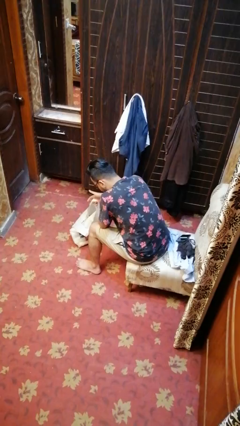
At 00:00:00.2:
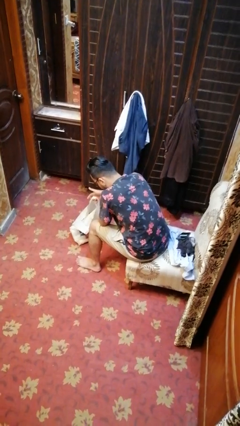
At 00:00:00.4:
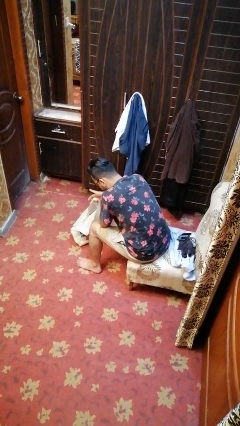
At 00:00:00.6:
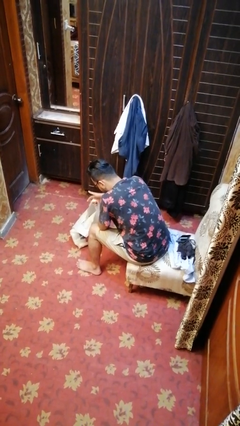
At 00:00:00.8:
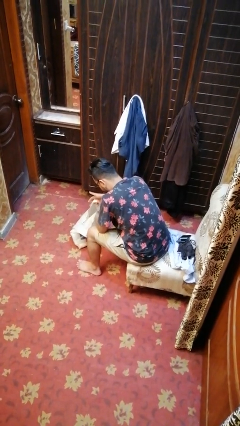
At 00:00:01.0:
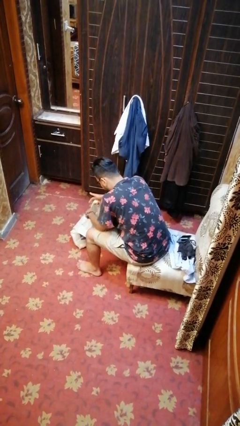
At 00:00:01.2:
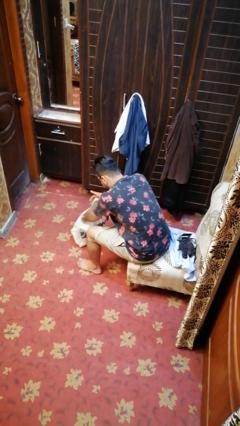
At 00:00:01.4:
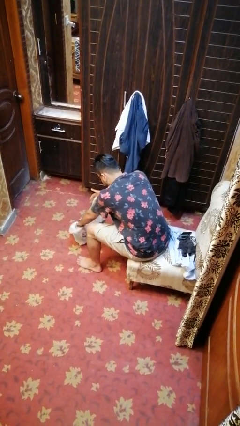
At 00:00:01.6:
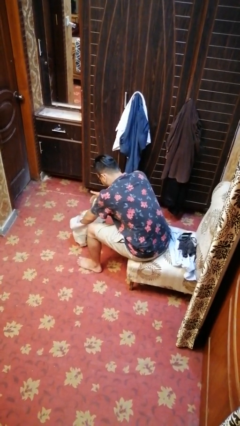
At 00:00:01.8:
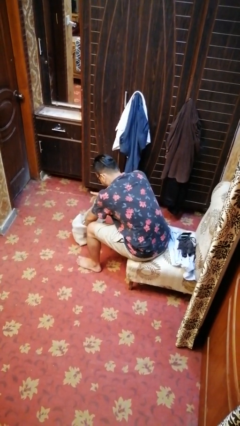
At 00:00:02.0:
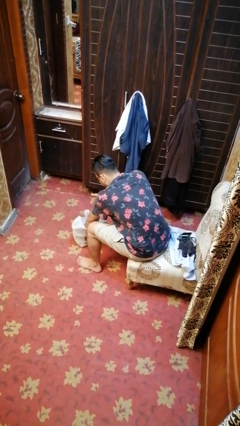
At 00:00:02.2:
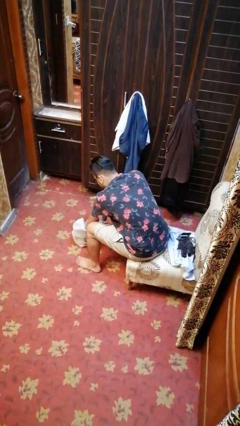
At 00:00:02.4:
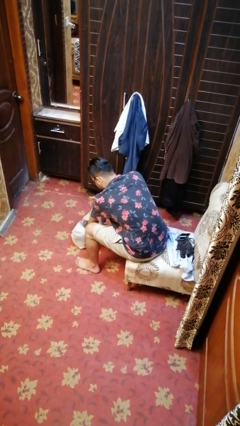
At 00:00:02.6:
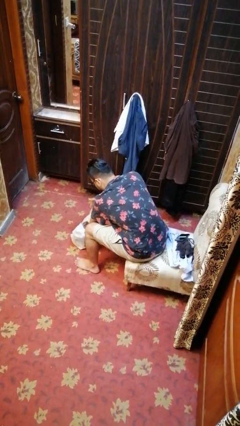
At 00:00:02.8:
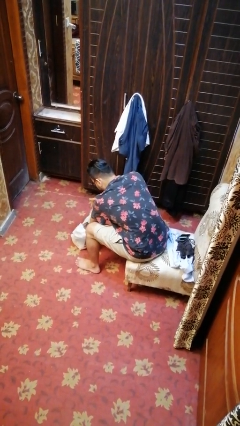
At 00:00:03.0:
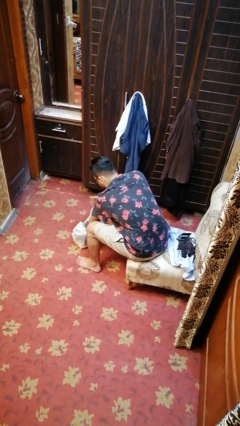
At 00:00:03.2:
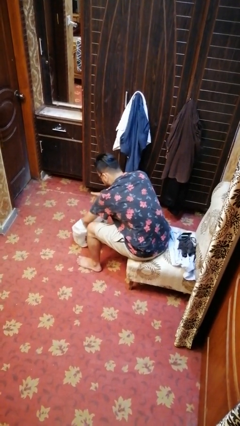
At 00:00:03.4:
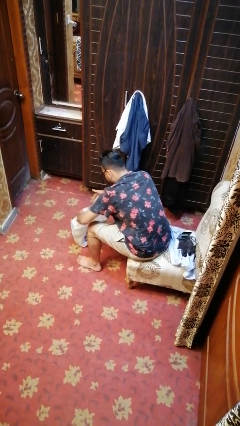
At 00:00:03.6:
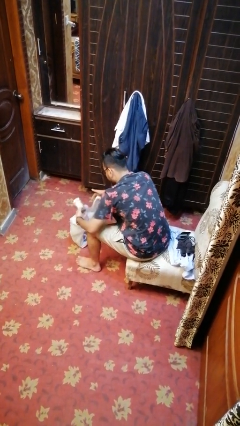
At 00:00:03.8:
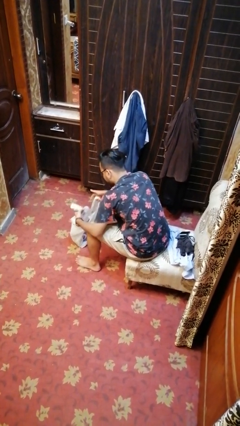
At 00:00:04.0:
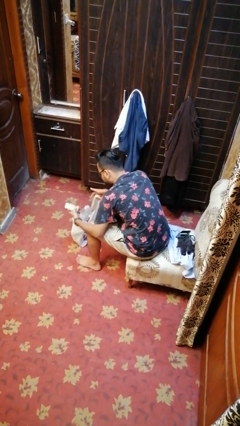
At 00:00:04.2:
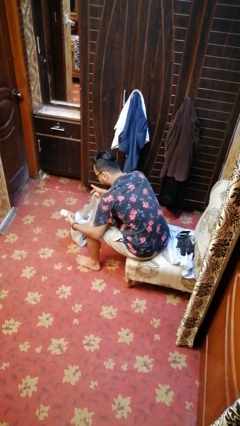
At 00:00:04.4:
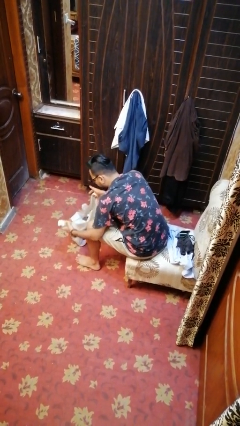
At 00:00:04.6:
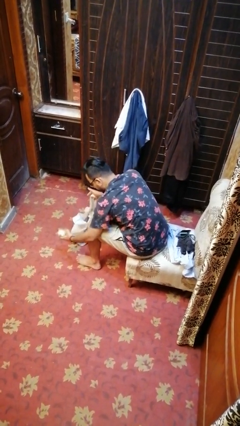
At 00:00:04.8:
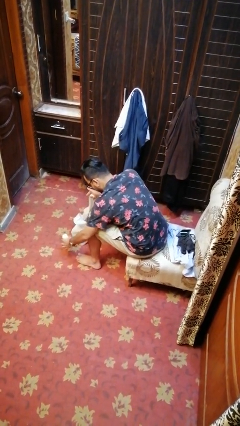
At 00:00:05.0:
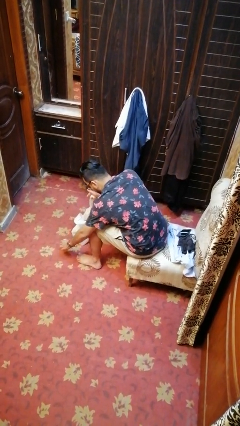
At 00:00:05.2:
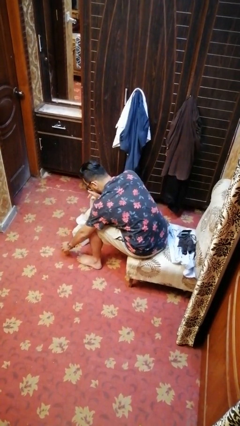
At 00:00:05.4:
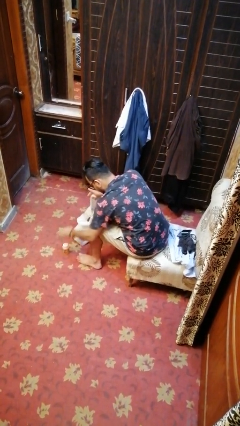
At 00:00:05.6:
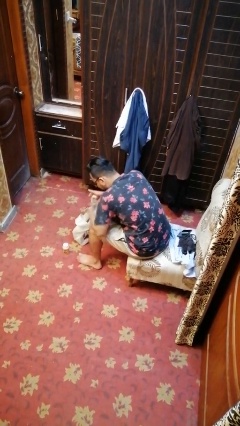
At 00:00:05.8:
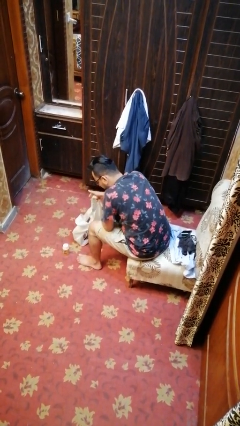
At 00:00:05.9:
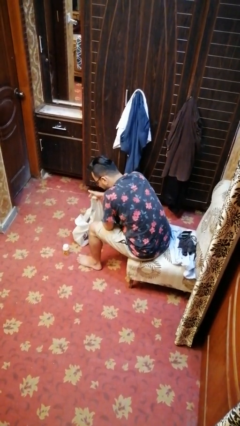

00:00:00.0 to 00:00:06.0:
person takes object from bag

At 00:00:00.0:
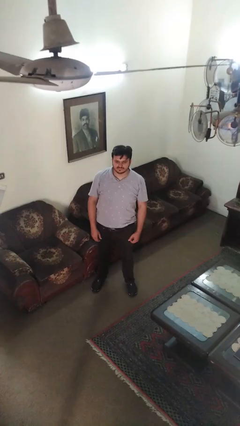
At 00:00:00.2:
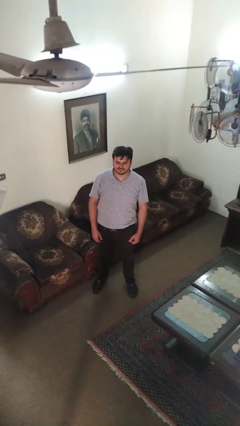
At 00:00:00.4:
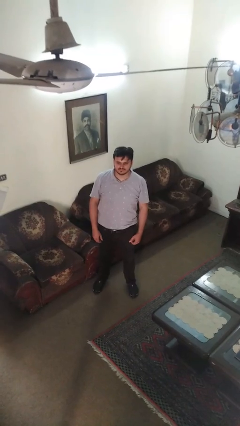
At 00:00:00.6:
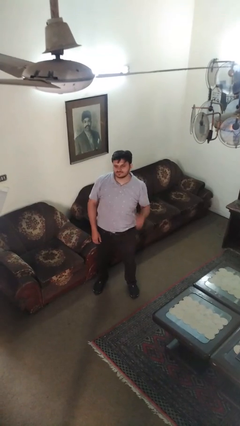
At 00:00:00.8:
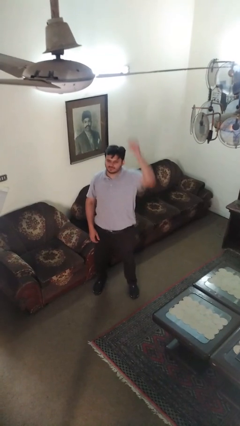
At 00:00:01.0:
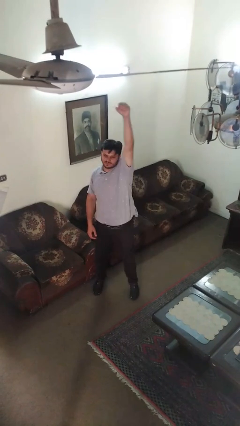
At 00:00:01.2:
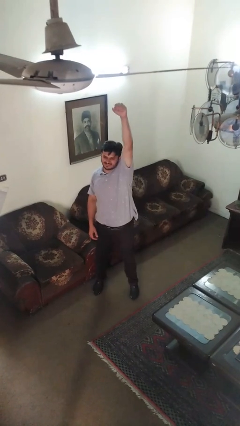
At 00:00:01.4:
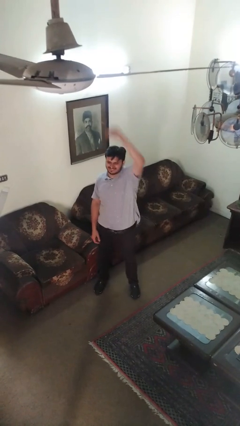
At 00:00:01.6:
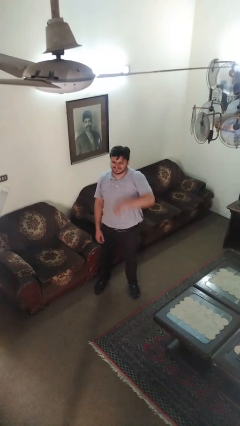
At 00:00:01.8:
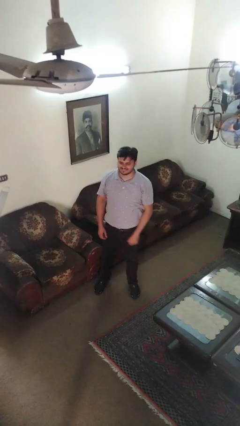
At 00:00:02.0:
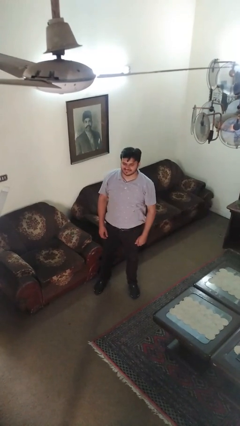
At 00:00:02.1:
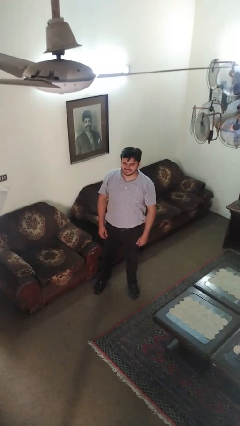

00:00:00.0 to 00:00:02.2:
person punches

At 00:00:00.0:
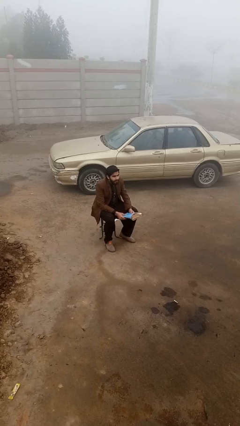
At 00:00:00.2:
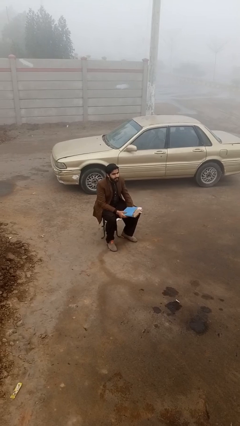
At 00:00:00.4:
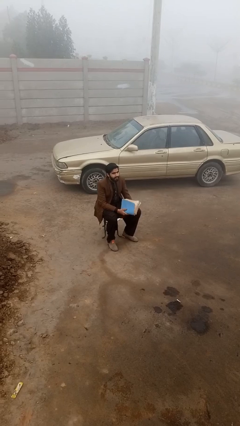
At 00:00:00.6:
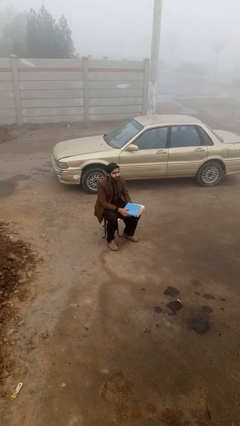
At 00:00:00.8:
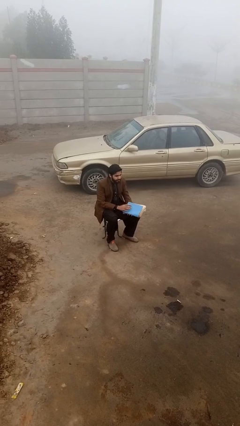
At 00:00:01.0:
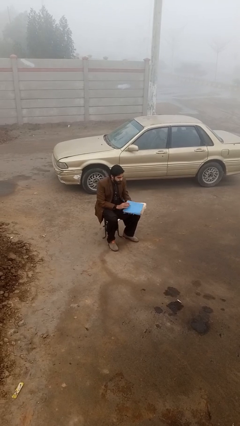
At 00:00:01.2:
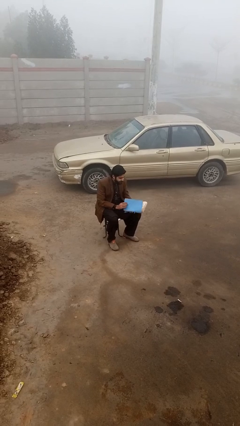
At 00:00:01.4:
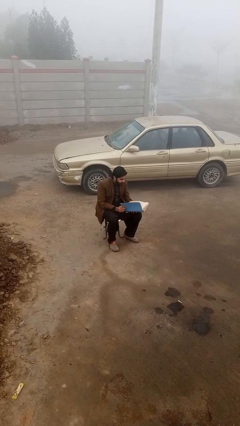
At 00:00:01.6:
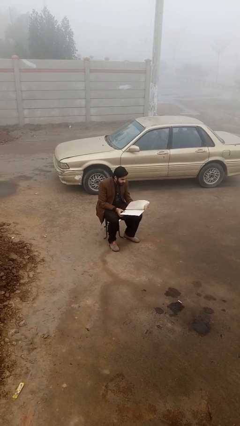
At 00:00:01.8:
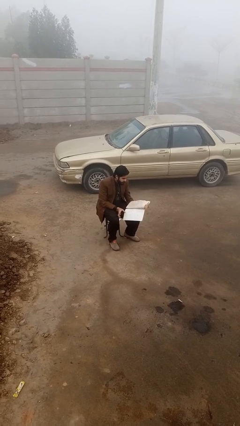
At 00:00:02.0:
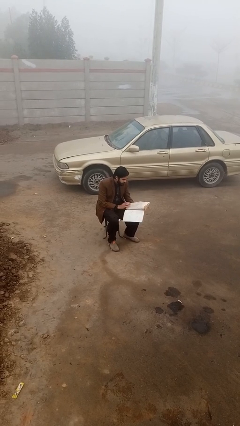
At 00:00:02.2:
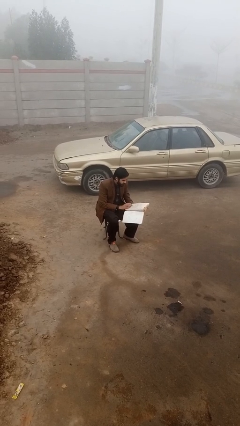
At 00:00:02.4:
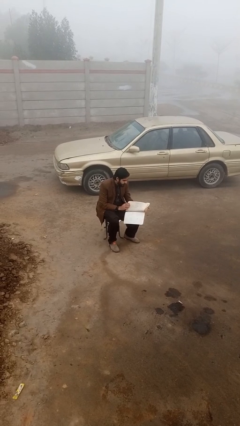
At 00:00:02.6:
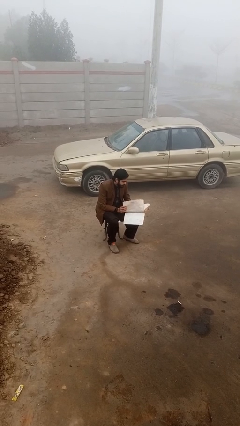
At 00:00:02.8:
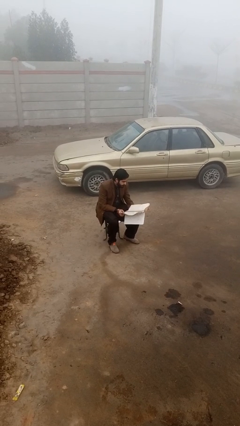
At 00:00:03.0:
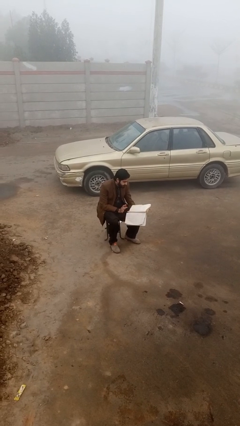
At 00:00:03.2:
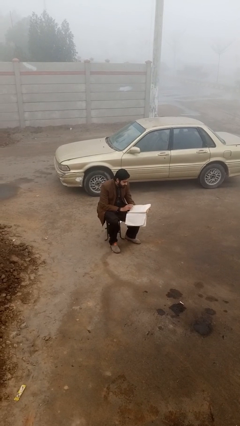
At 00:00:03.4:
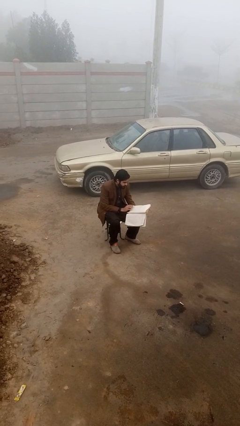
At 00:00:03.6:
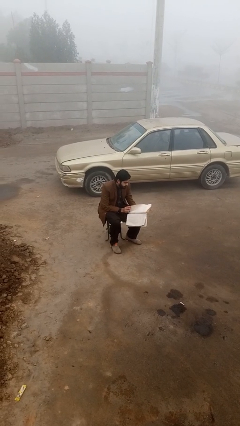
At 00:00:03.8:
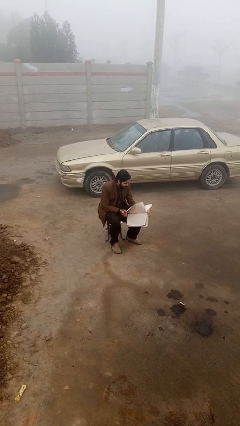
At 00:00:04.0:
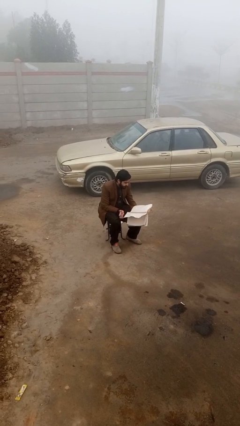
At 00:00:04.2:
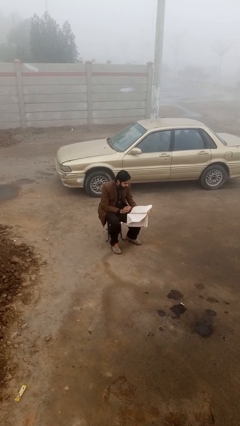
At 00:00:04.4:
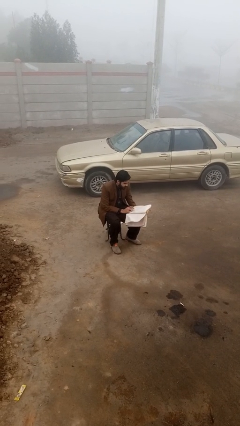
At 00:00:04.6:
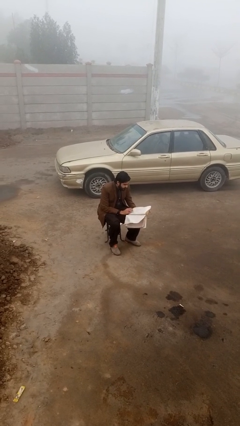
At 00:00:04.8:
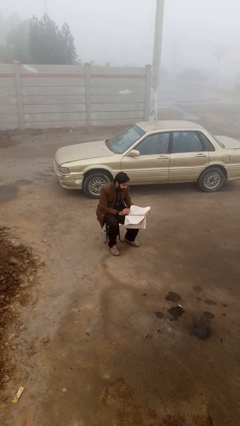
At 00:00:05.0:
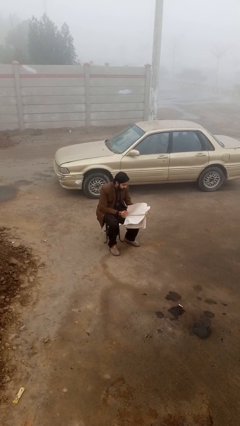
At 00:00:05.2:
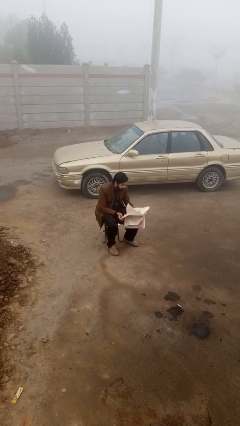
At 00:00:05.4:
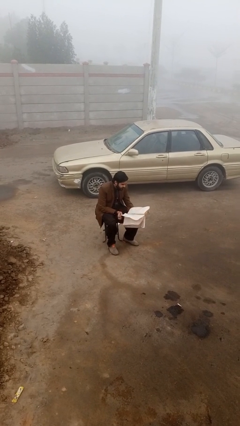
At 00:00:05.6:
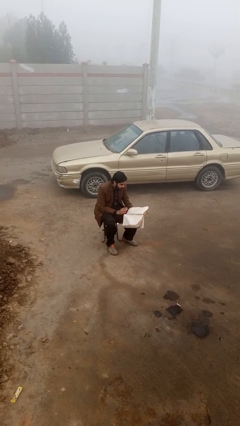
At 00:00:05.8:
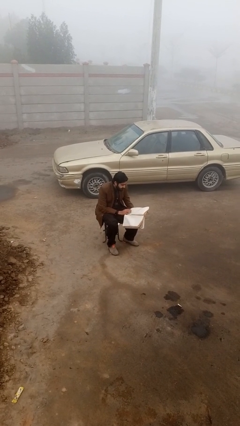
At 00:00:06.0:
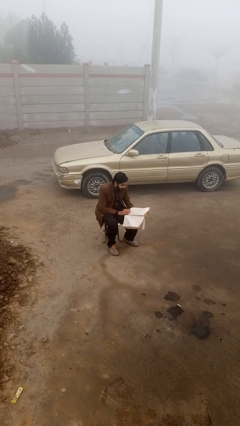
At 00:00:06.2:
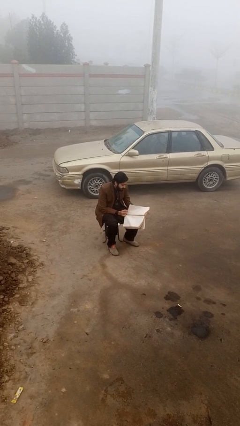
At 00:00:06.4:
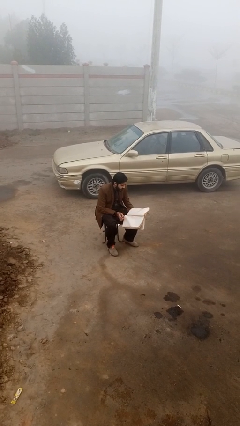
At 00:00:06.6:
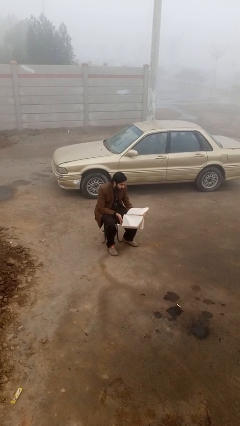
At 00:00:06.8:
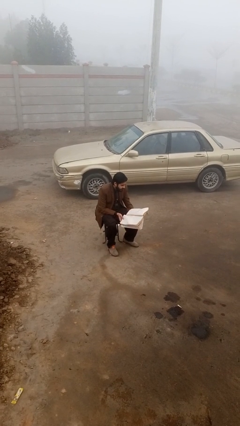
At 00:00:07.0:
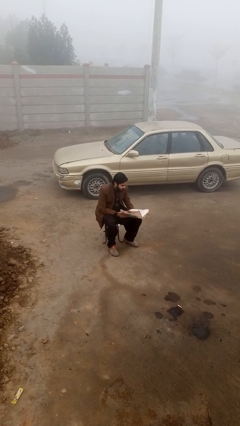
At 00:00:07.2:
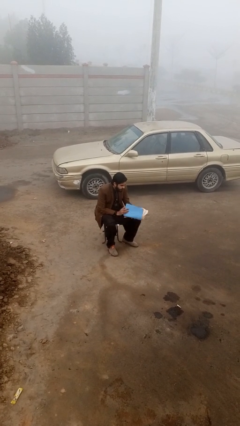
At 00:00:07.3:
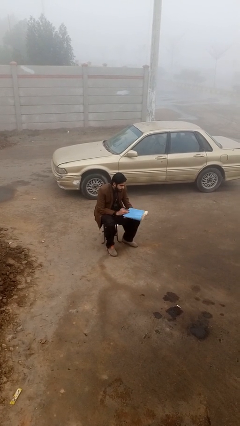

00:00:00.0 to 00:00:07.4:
person reads document

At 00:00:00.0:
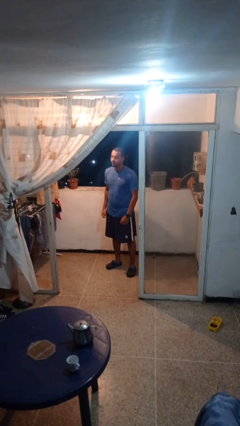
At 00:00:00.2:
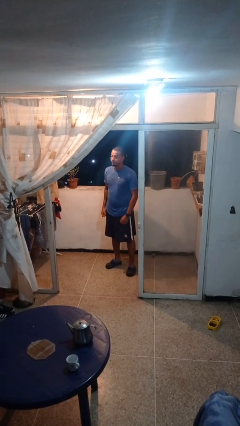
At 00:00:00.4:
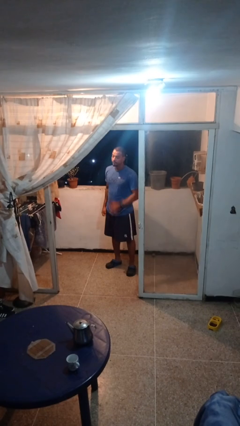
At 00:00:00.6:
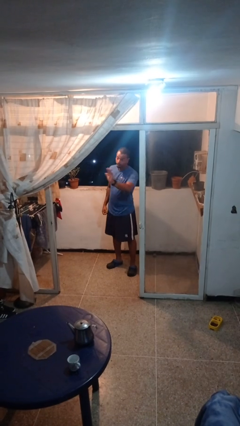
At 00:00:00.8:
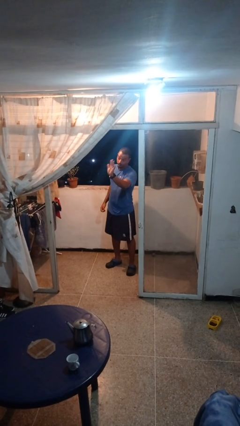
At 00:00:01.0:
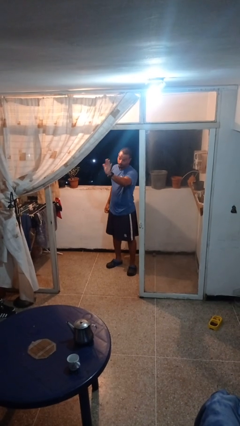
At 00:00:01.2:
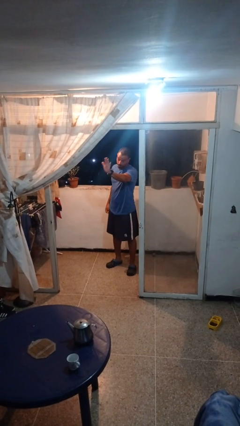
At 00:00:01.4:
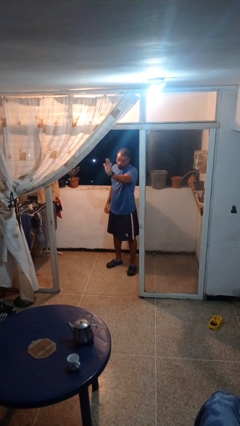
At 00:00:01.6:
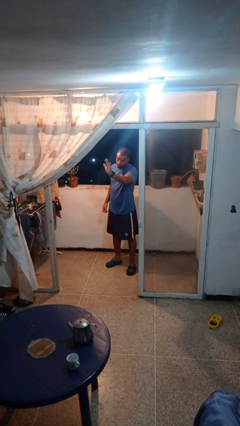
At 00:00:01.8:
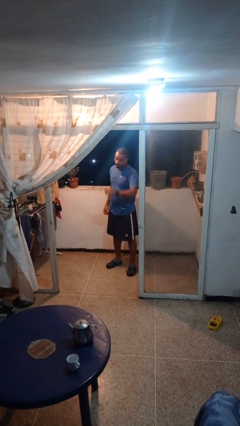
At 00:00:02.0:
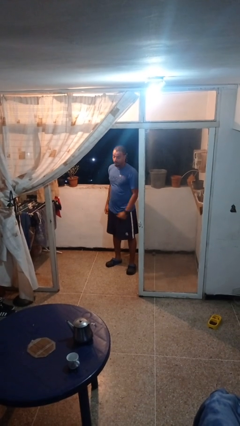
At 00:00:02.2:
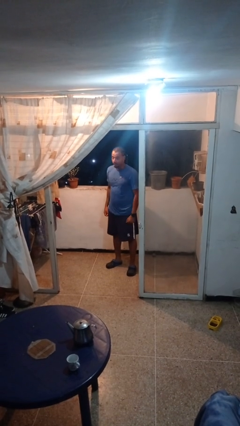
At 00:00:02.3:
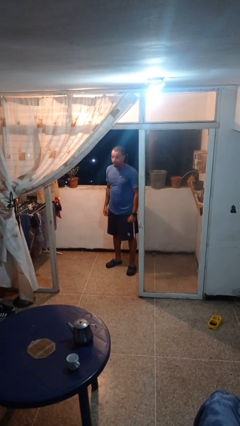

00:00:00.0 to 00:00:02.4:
person gestures stop
